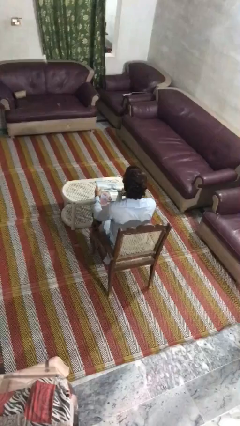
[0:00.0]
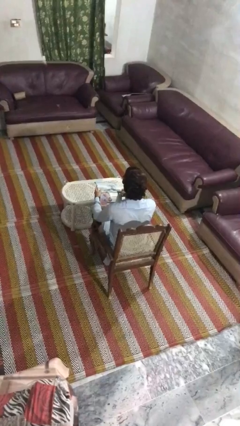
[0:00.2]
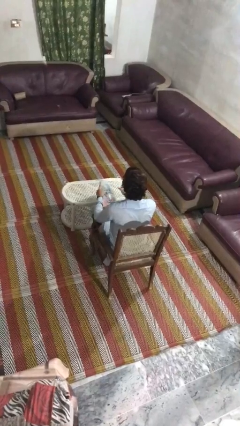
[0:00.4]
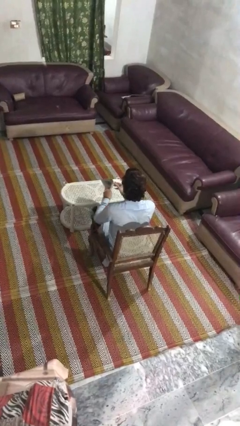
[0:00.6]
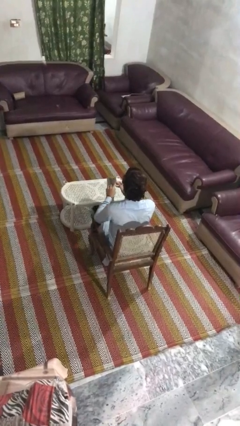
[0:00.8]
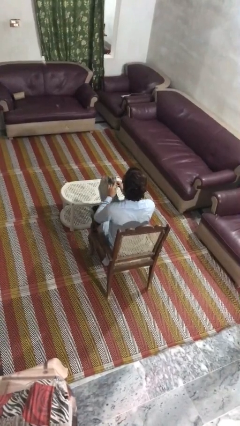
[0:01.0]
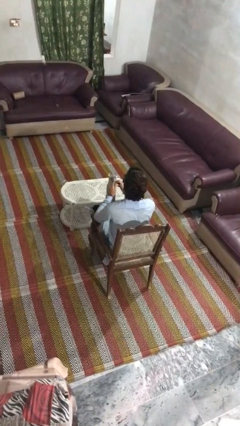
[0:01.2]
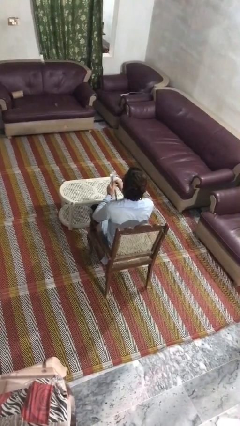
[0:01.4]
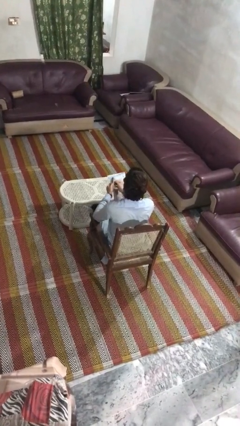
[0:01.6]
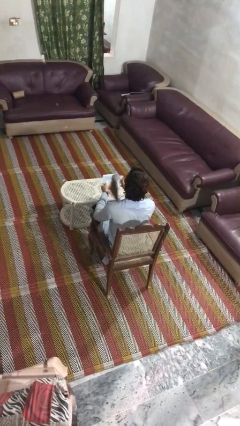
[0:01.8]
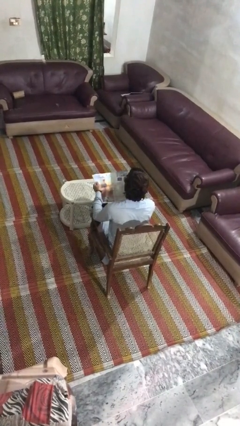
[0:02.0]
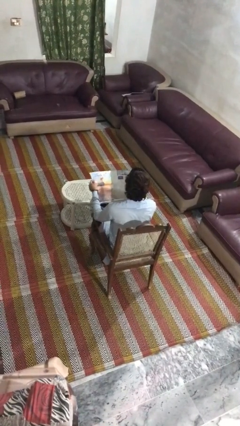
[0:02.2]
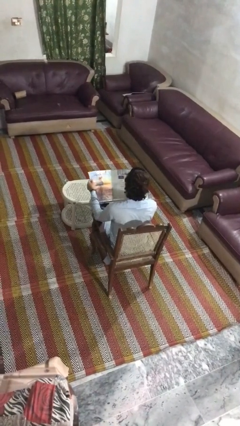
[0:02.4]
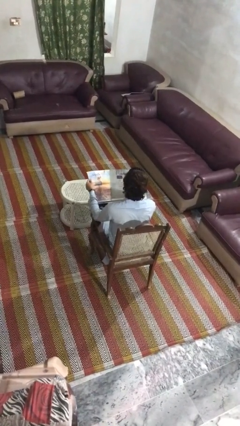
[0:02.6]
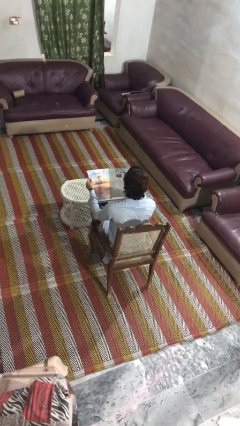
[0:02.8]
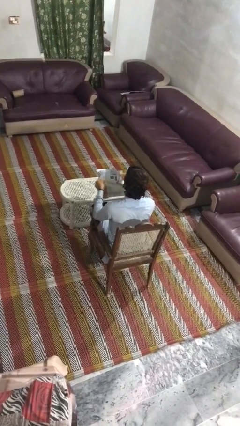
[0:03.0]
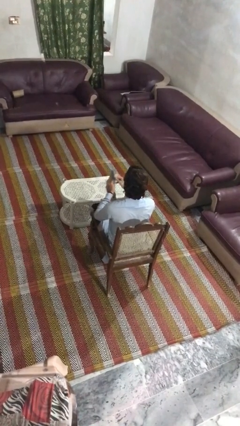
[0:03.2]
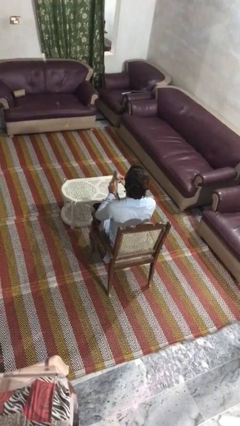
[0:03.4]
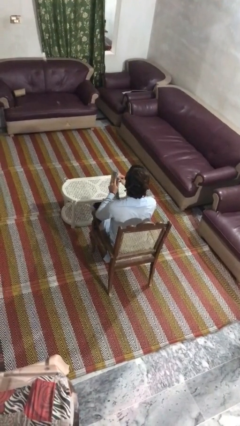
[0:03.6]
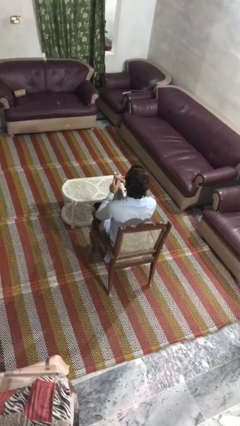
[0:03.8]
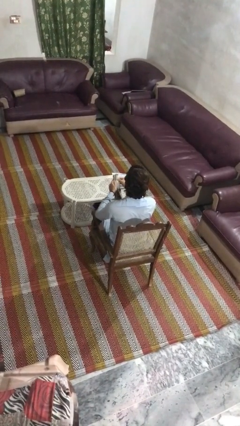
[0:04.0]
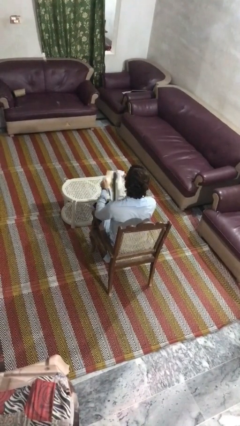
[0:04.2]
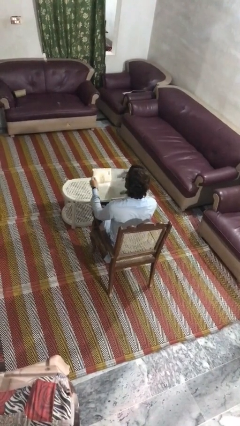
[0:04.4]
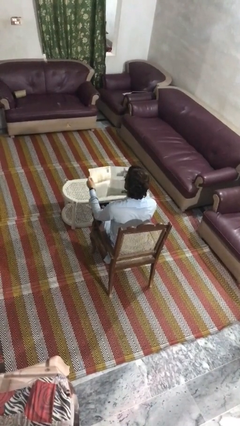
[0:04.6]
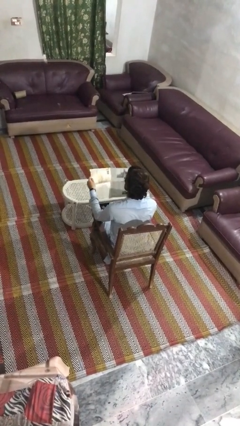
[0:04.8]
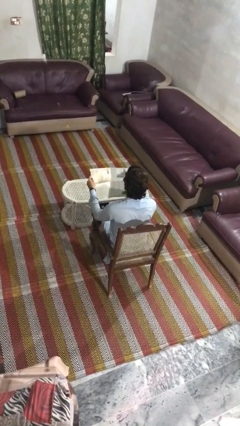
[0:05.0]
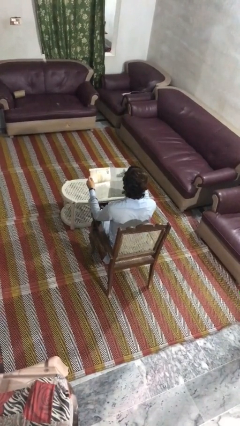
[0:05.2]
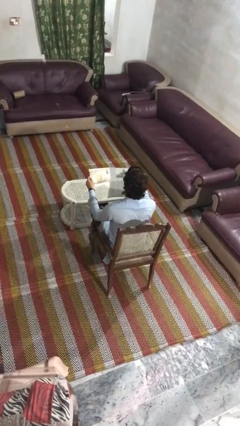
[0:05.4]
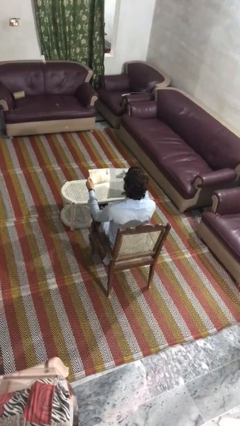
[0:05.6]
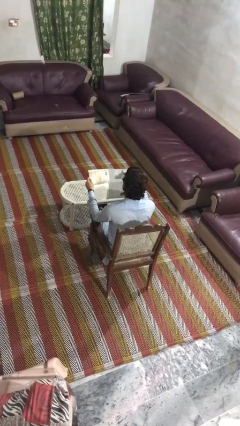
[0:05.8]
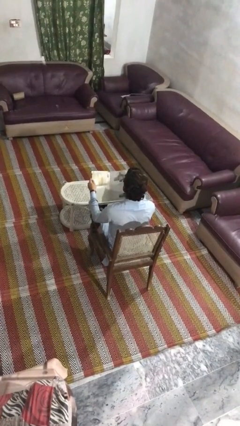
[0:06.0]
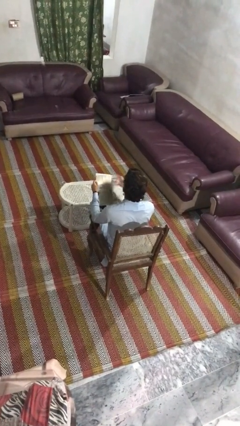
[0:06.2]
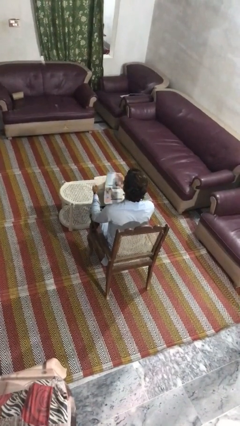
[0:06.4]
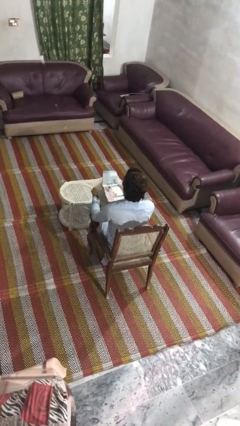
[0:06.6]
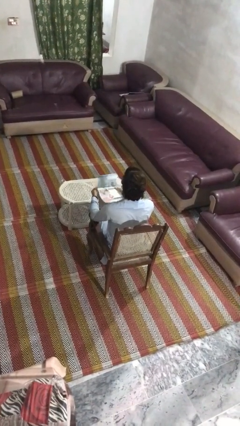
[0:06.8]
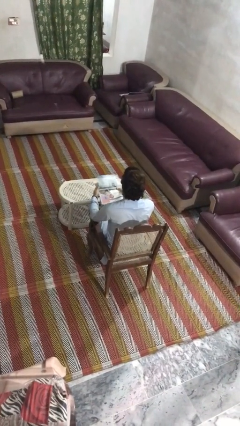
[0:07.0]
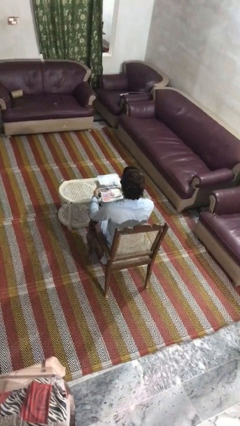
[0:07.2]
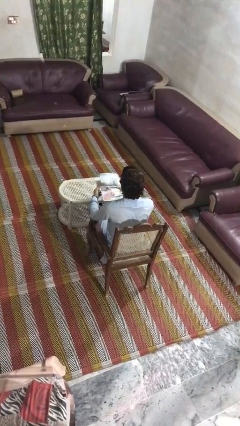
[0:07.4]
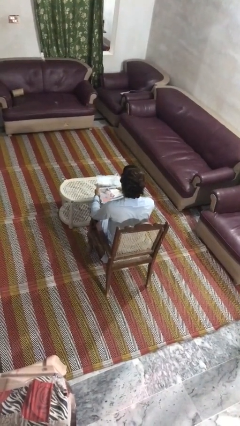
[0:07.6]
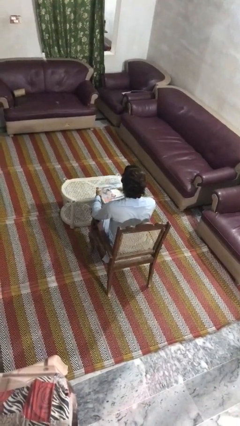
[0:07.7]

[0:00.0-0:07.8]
person reads magazine

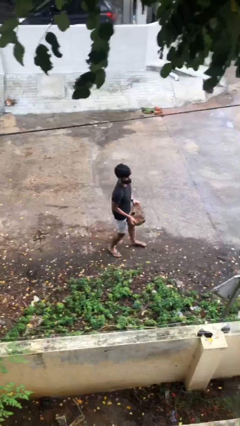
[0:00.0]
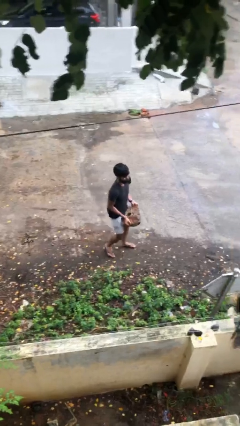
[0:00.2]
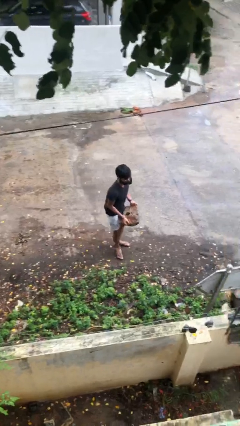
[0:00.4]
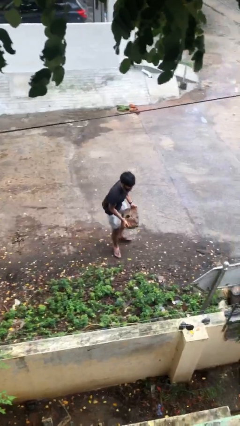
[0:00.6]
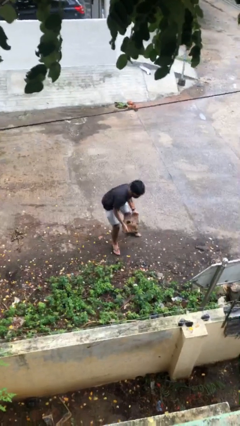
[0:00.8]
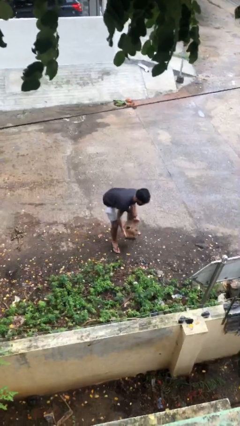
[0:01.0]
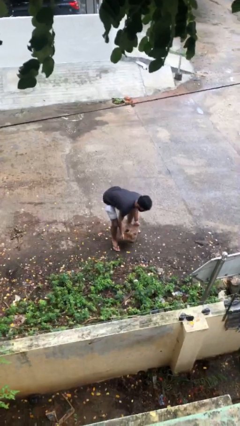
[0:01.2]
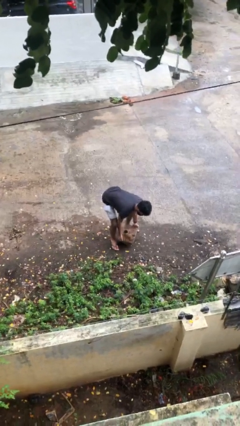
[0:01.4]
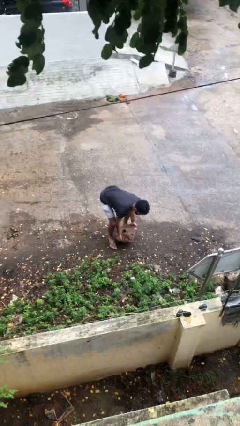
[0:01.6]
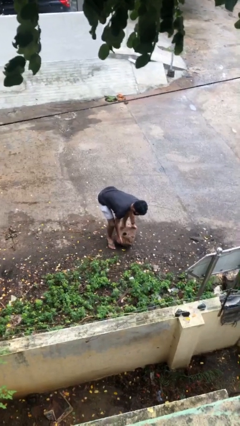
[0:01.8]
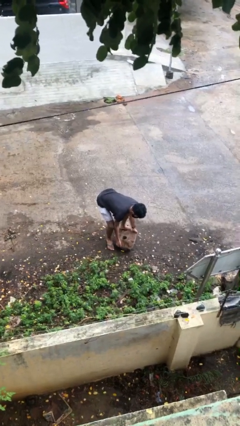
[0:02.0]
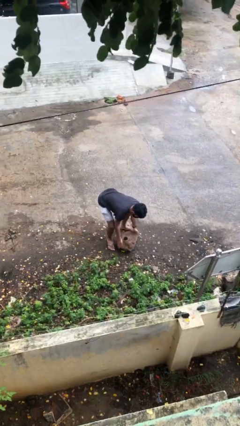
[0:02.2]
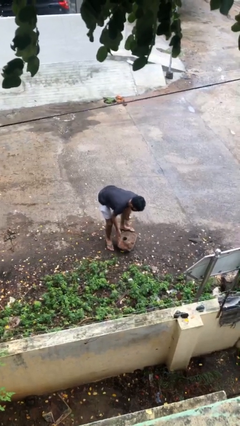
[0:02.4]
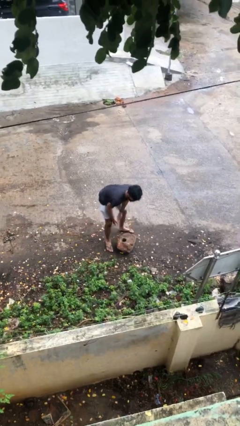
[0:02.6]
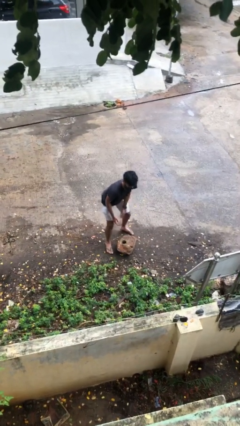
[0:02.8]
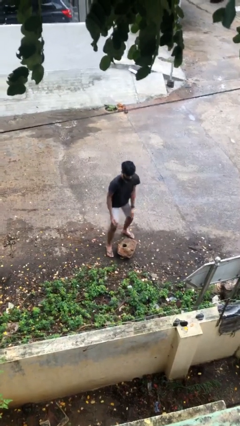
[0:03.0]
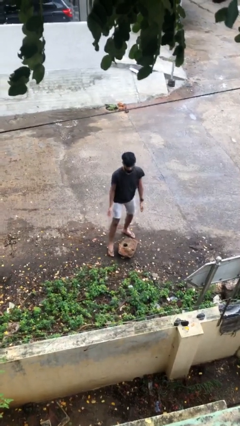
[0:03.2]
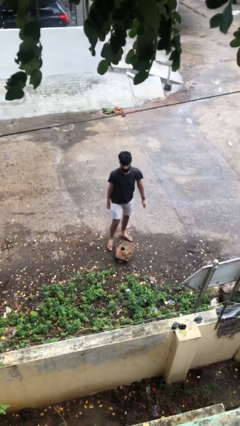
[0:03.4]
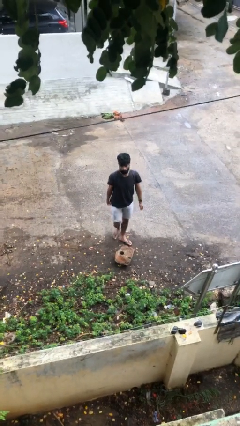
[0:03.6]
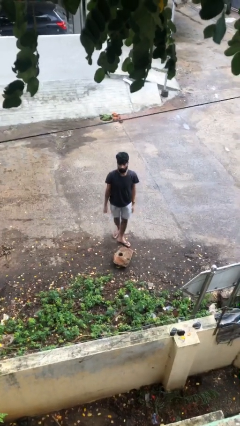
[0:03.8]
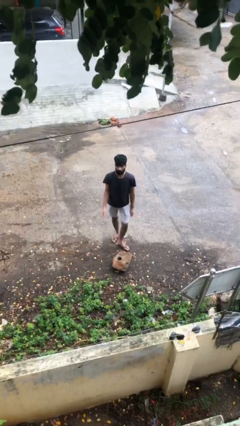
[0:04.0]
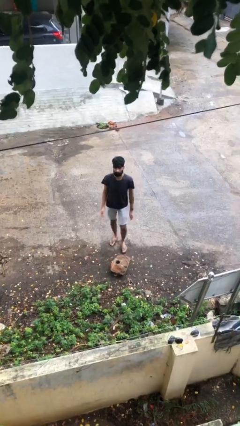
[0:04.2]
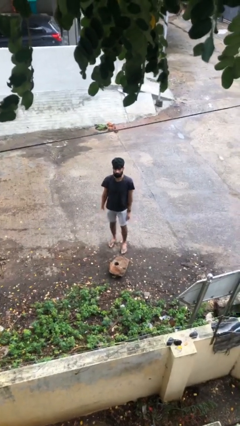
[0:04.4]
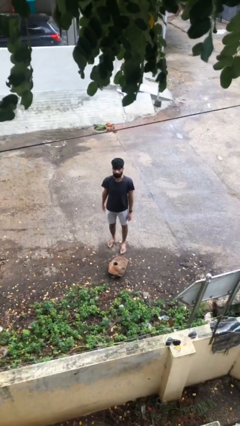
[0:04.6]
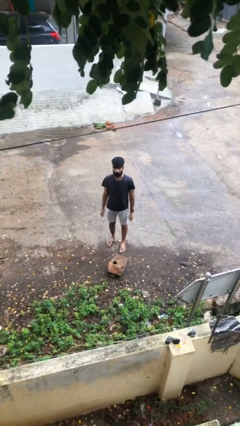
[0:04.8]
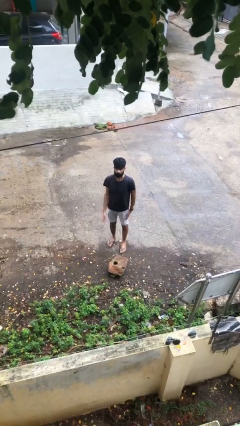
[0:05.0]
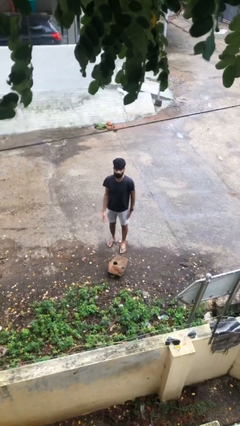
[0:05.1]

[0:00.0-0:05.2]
person puts down object on floor

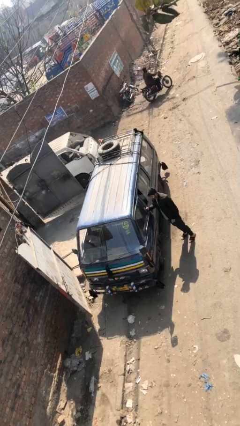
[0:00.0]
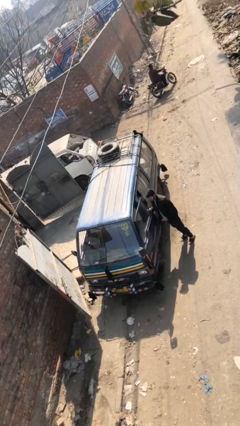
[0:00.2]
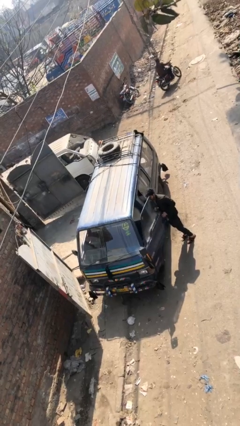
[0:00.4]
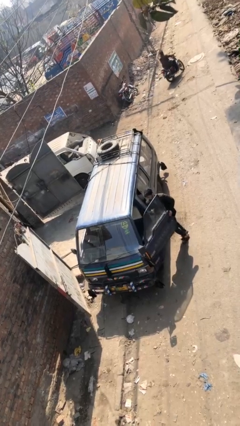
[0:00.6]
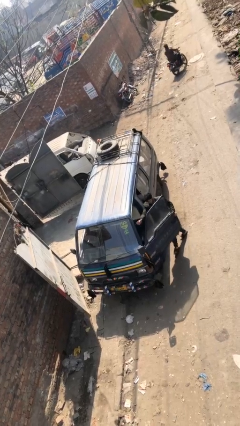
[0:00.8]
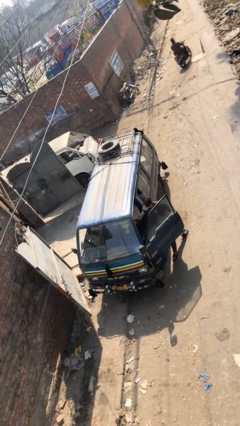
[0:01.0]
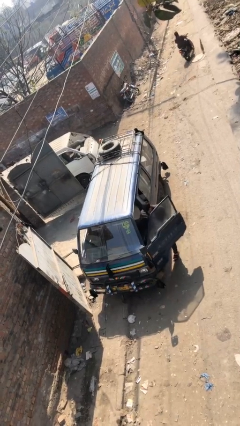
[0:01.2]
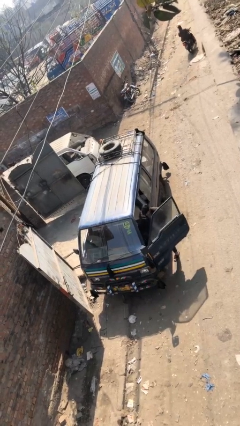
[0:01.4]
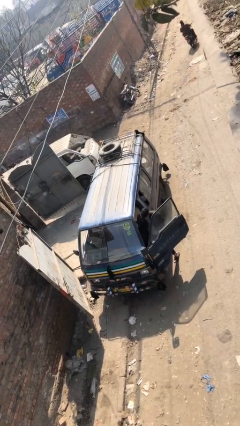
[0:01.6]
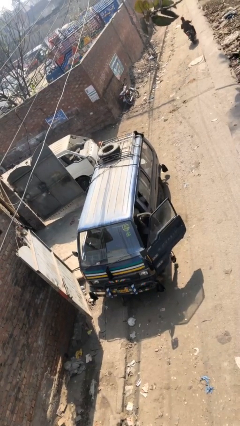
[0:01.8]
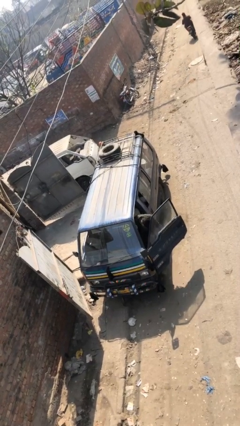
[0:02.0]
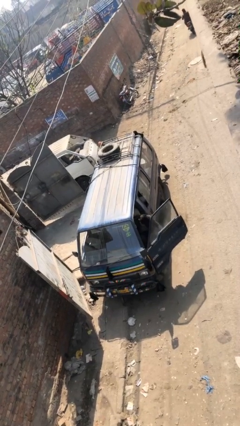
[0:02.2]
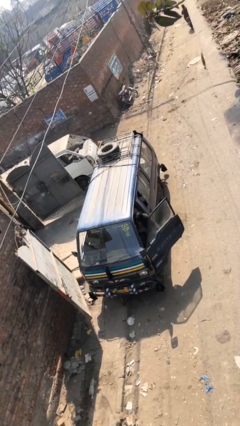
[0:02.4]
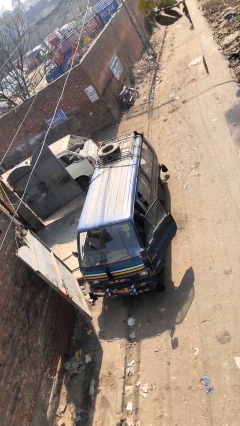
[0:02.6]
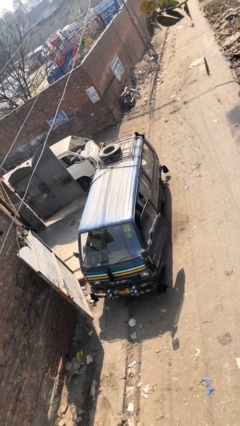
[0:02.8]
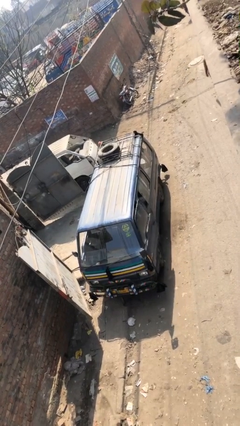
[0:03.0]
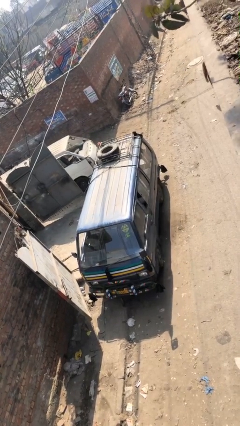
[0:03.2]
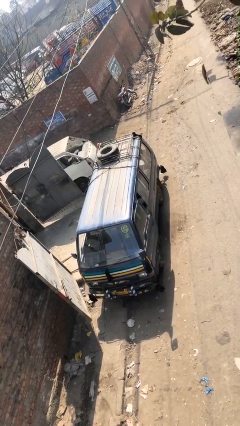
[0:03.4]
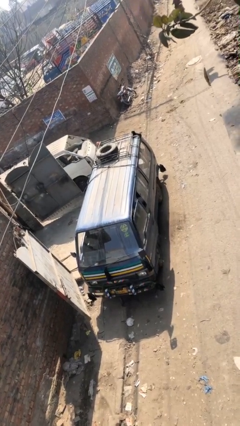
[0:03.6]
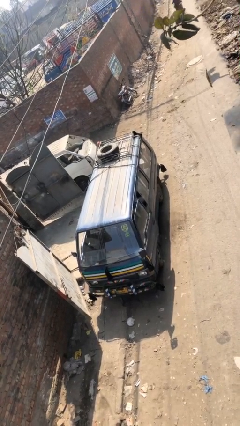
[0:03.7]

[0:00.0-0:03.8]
car picks up person

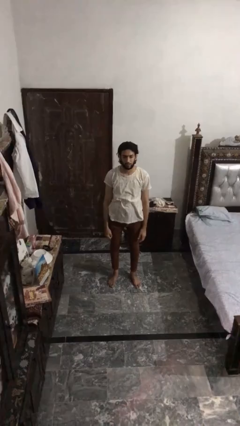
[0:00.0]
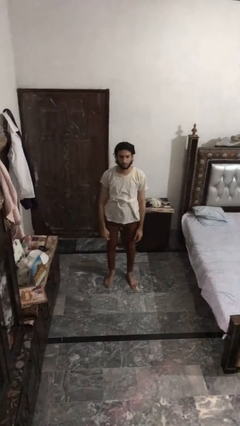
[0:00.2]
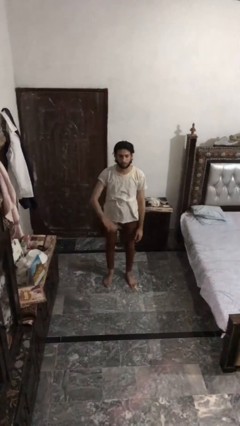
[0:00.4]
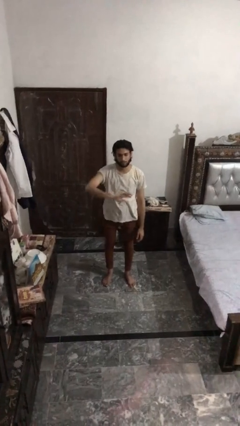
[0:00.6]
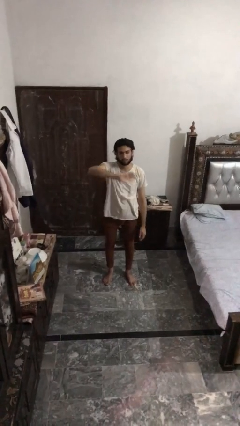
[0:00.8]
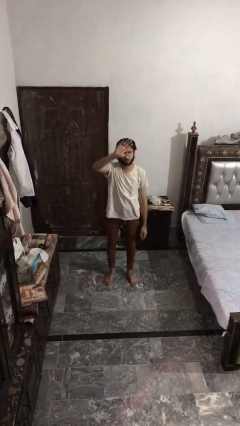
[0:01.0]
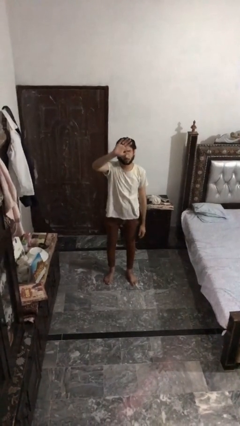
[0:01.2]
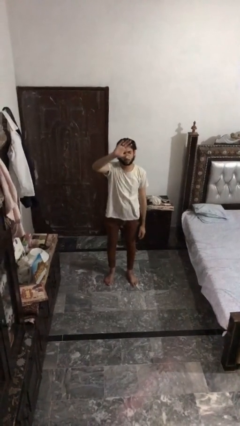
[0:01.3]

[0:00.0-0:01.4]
person gestures swipe up
